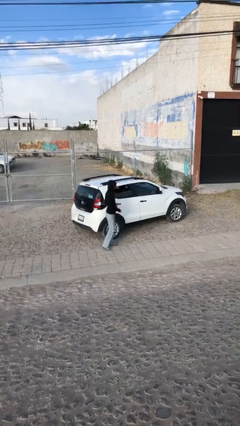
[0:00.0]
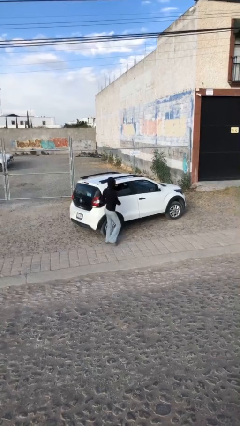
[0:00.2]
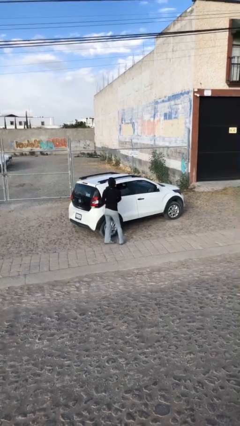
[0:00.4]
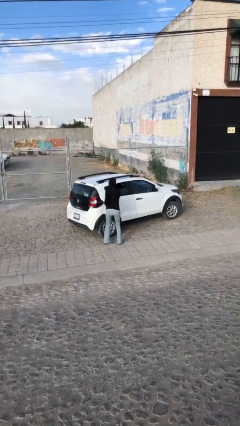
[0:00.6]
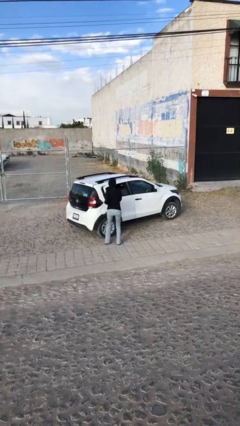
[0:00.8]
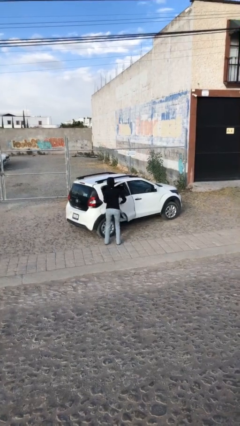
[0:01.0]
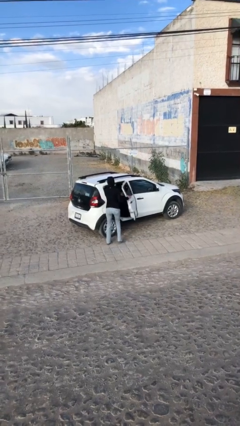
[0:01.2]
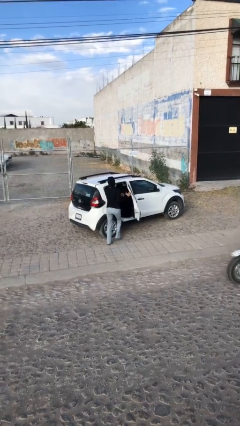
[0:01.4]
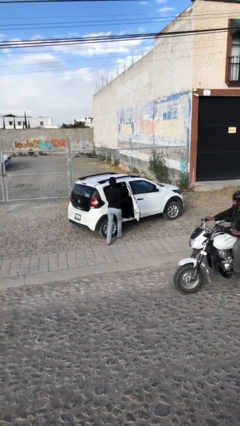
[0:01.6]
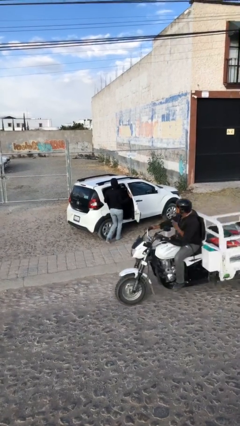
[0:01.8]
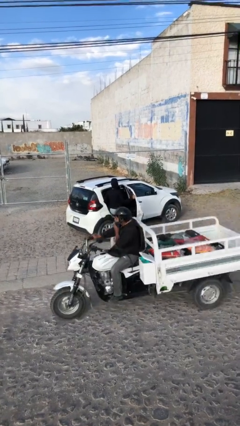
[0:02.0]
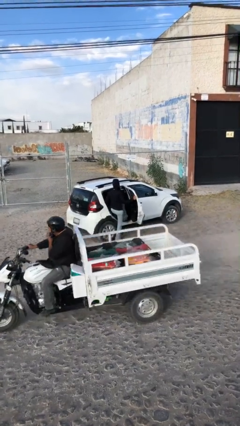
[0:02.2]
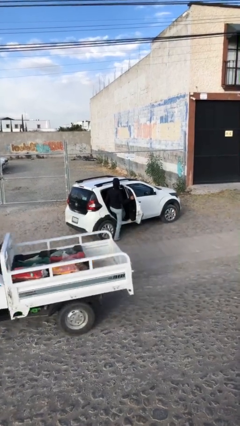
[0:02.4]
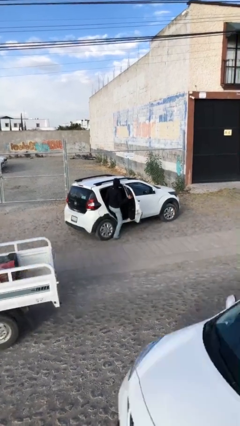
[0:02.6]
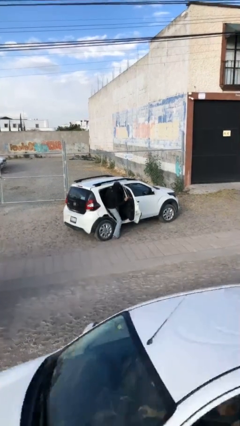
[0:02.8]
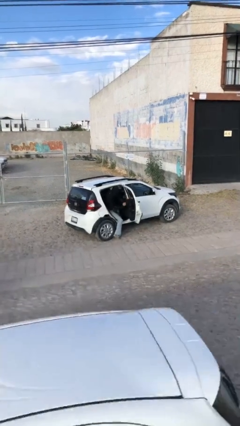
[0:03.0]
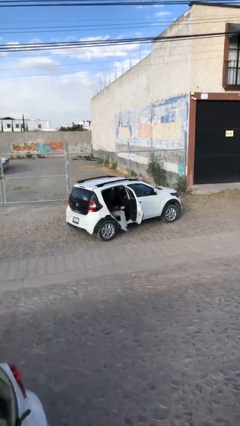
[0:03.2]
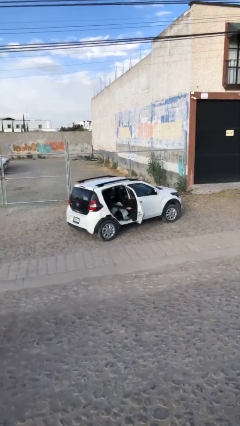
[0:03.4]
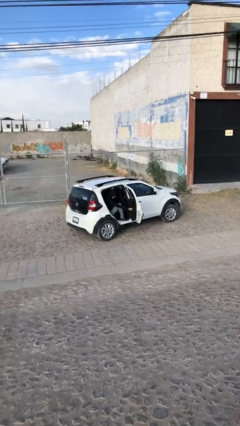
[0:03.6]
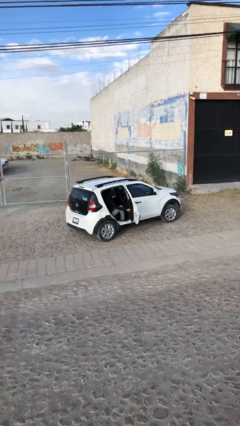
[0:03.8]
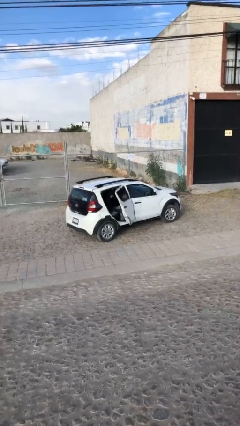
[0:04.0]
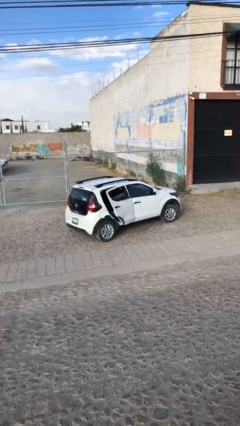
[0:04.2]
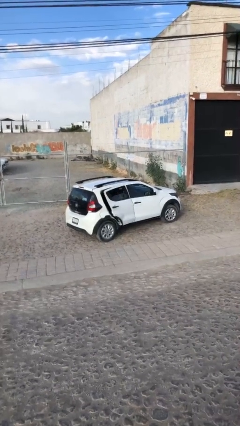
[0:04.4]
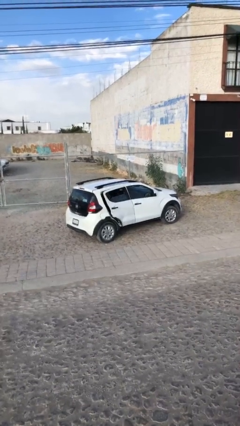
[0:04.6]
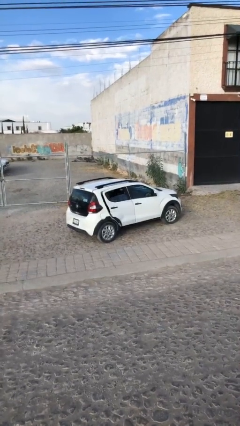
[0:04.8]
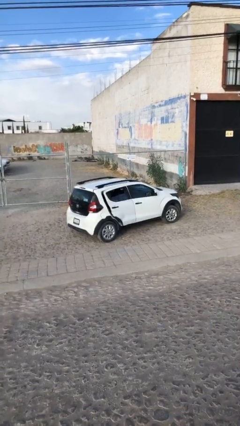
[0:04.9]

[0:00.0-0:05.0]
car picks up person

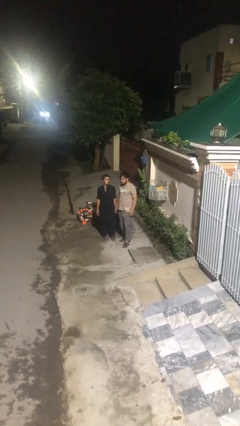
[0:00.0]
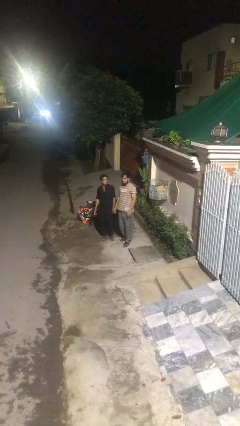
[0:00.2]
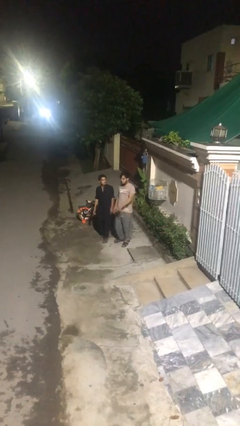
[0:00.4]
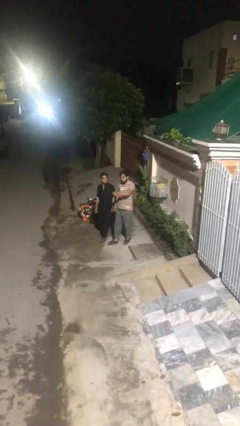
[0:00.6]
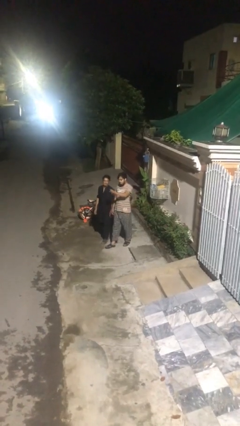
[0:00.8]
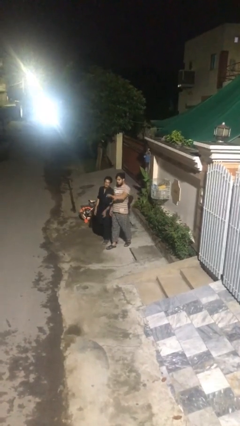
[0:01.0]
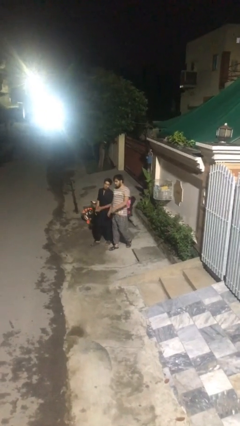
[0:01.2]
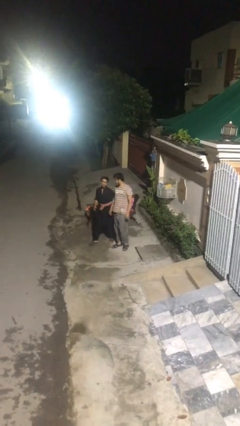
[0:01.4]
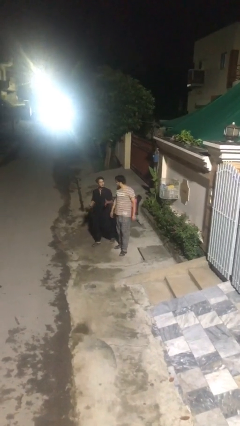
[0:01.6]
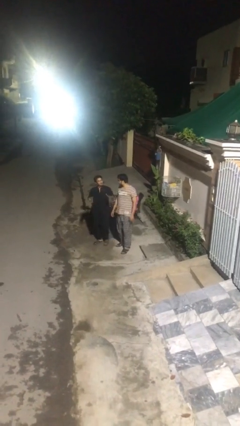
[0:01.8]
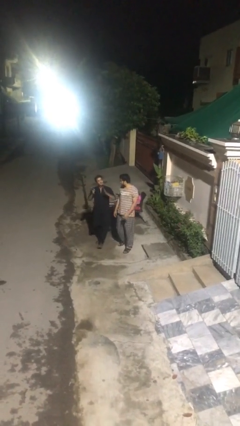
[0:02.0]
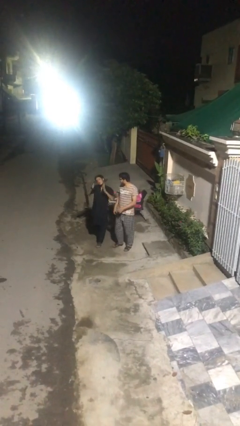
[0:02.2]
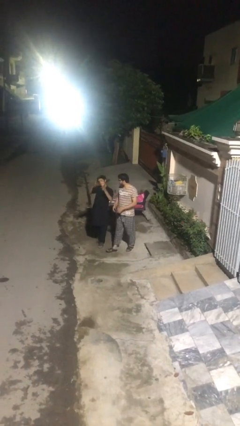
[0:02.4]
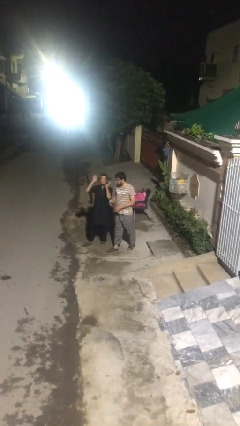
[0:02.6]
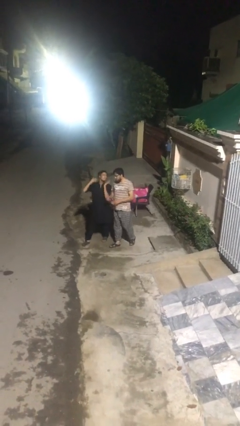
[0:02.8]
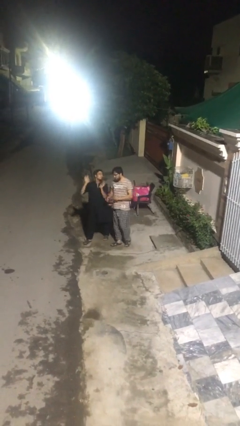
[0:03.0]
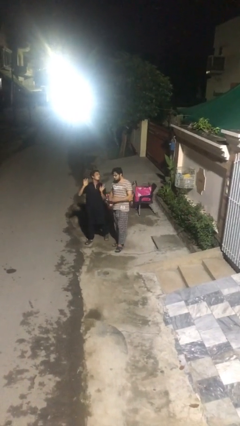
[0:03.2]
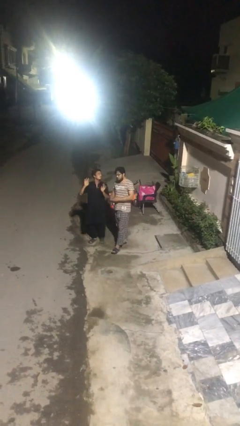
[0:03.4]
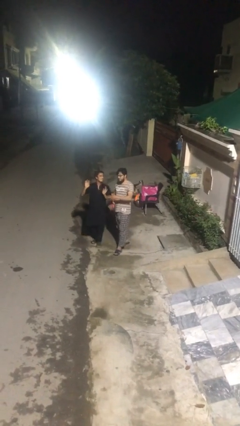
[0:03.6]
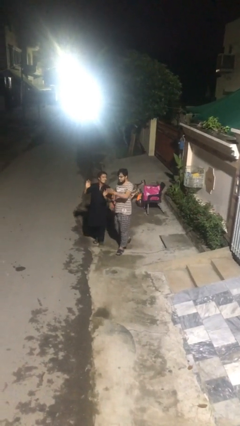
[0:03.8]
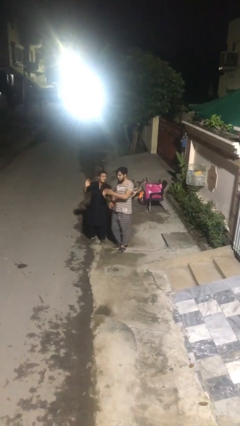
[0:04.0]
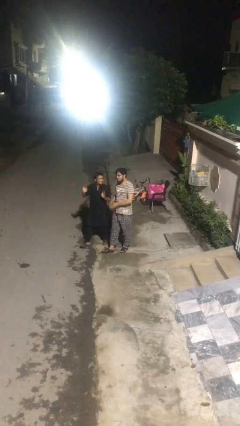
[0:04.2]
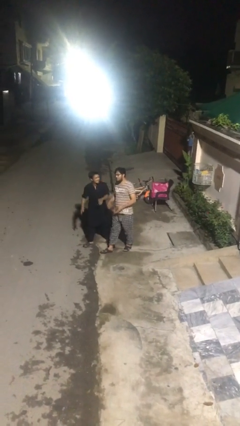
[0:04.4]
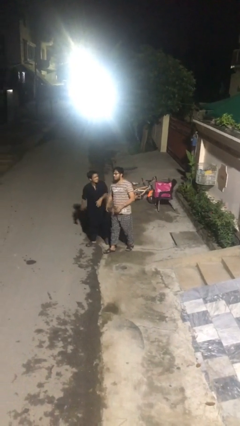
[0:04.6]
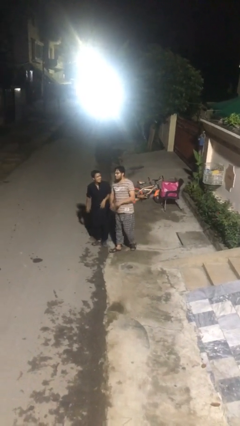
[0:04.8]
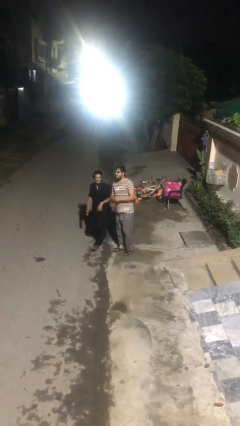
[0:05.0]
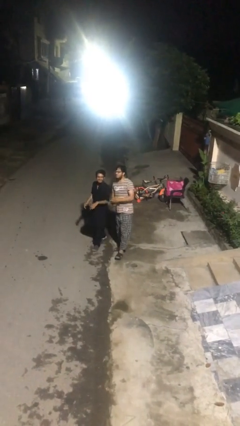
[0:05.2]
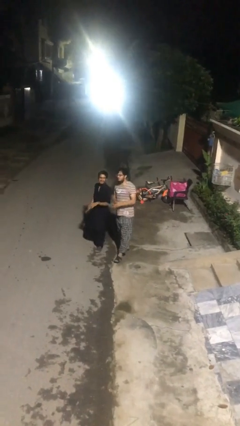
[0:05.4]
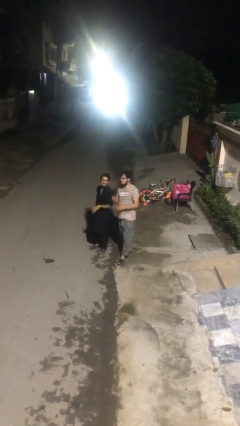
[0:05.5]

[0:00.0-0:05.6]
person talks to person

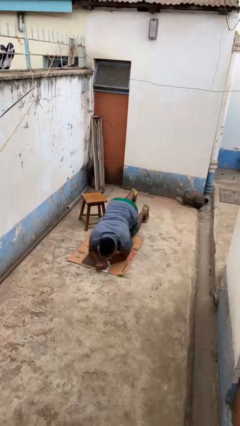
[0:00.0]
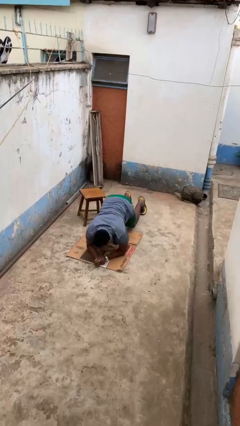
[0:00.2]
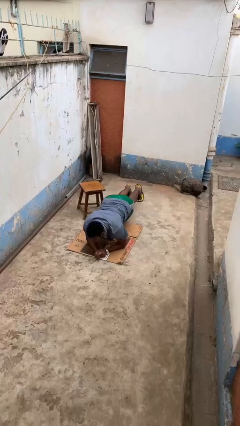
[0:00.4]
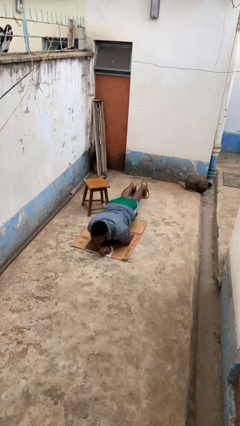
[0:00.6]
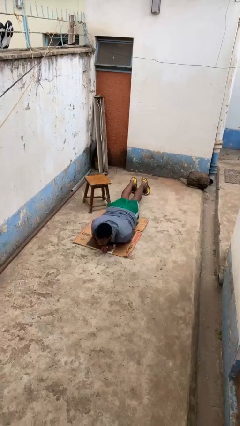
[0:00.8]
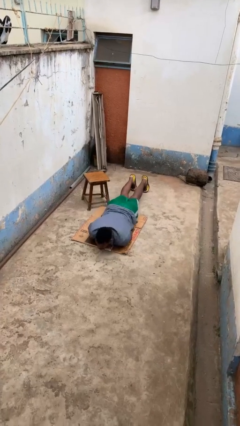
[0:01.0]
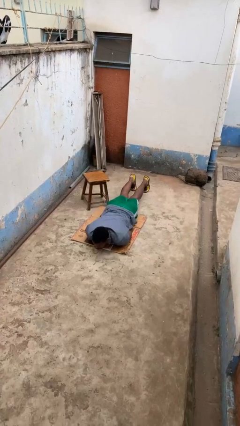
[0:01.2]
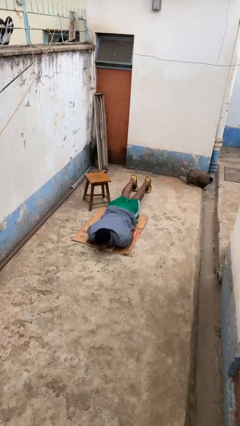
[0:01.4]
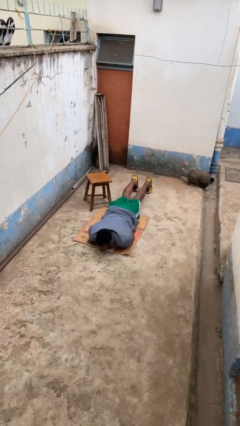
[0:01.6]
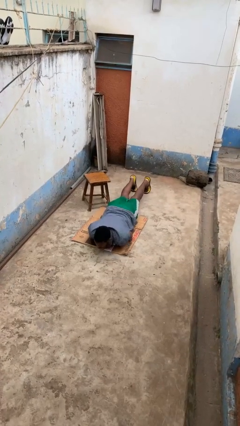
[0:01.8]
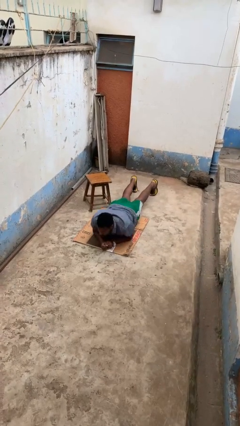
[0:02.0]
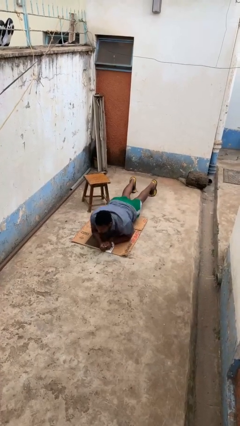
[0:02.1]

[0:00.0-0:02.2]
person lies down on floor

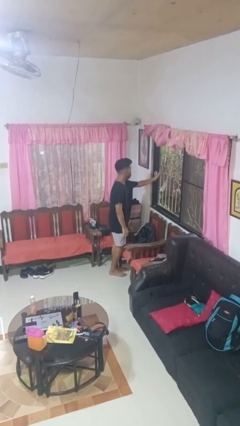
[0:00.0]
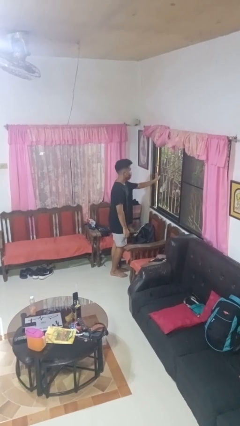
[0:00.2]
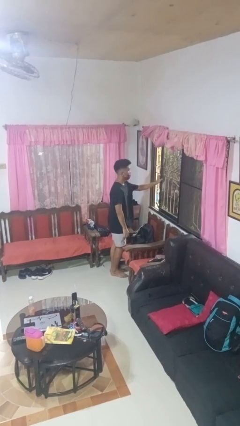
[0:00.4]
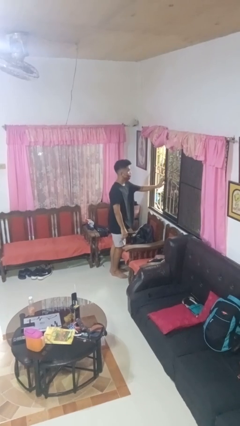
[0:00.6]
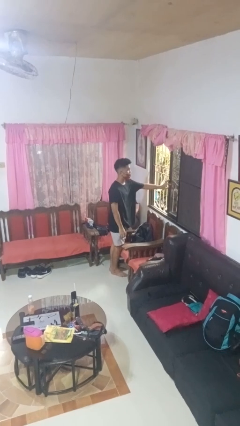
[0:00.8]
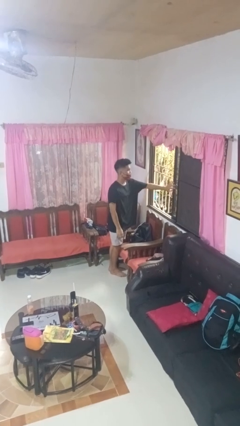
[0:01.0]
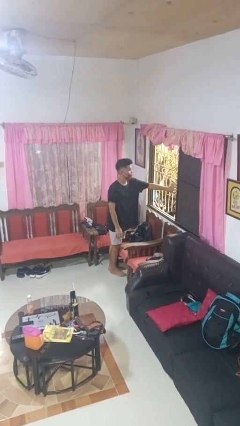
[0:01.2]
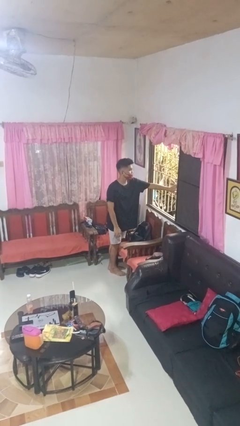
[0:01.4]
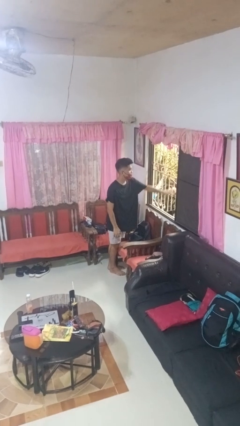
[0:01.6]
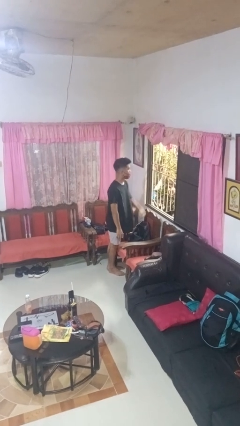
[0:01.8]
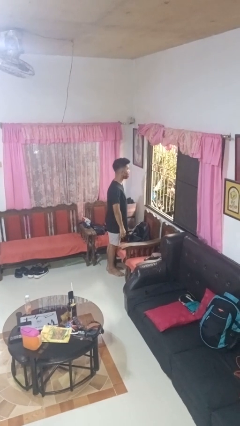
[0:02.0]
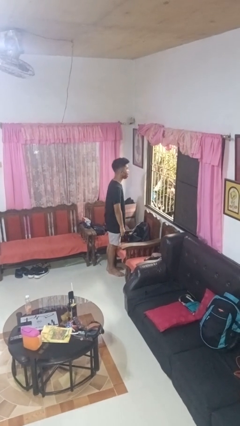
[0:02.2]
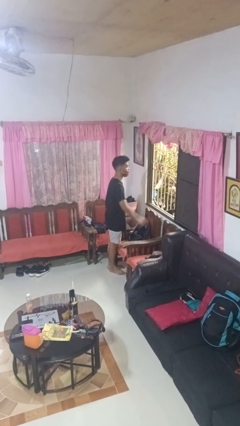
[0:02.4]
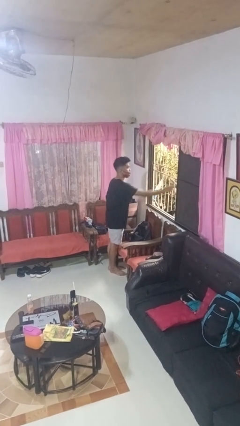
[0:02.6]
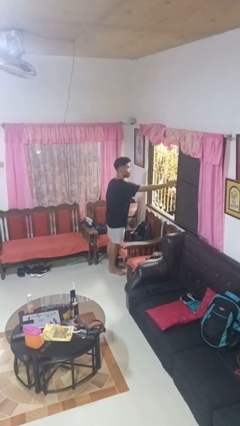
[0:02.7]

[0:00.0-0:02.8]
person opens home window

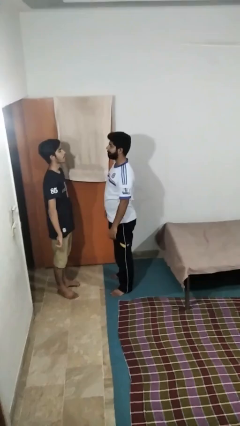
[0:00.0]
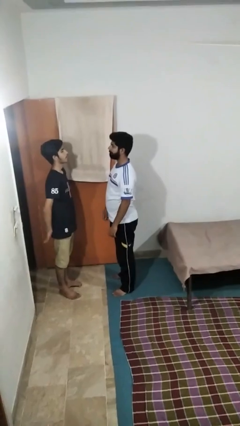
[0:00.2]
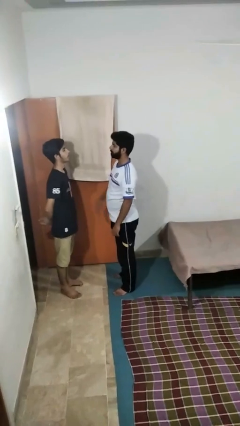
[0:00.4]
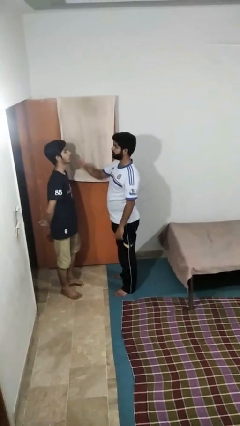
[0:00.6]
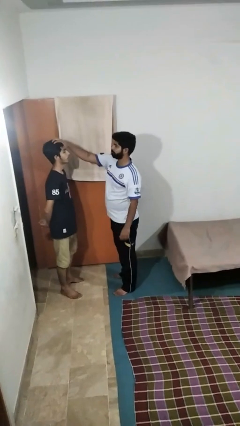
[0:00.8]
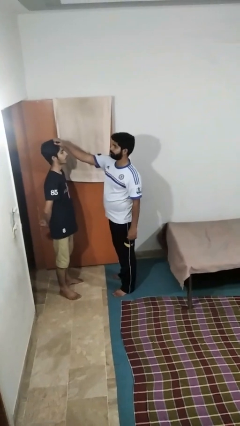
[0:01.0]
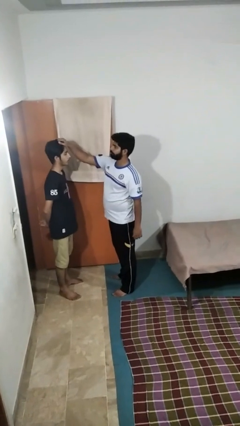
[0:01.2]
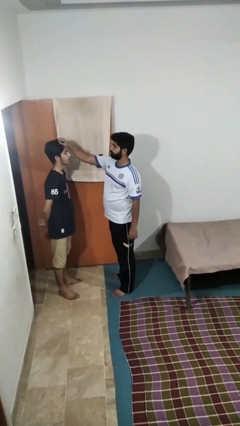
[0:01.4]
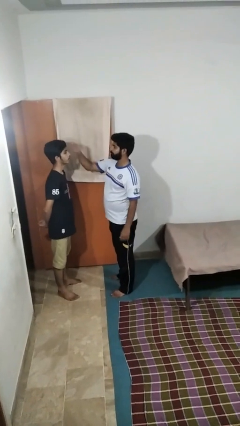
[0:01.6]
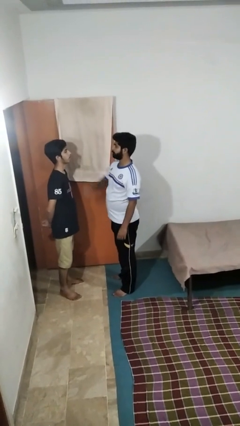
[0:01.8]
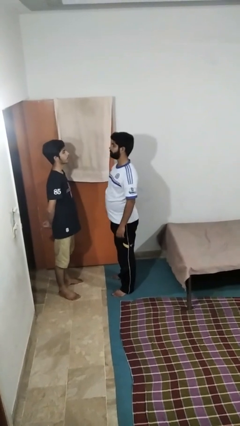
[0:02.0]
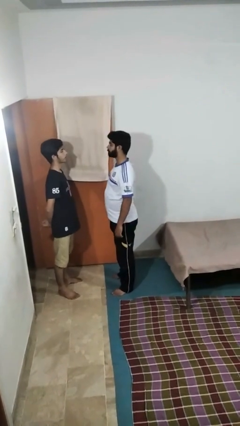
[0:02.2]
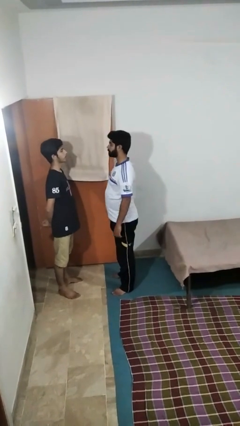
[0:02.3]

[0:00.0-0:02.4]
person grabs person by hair
